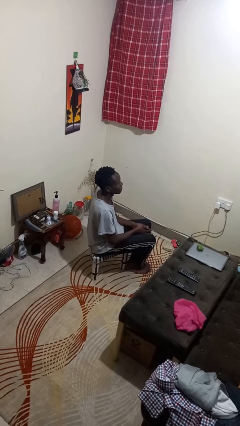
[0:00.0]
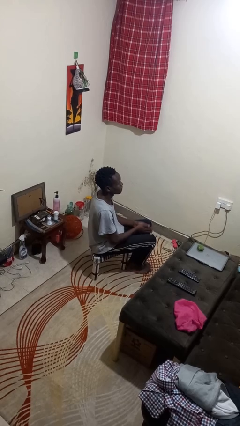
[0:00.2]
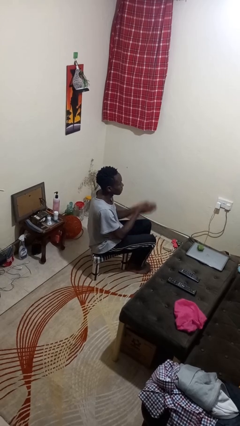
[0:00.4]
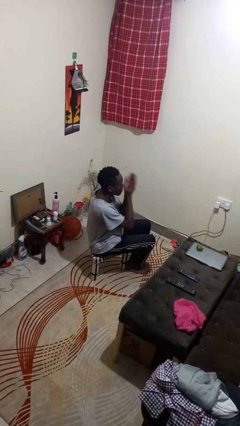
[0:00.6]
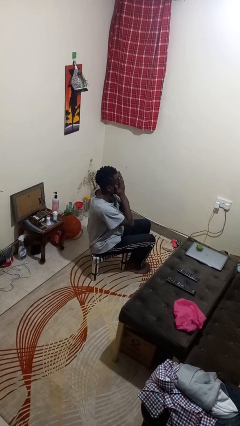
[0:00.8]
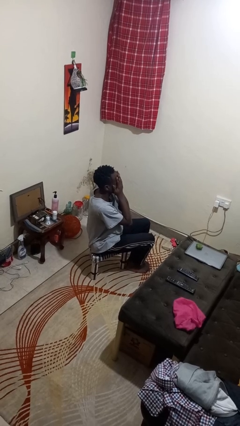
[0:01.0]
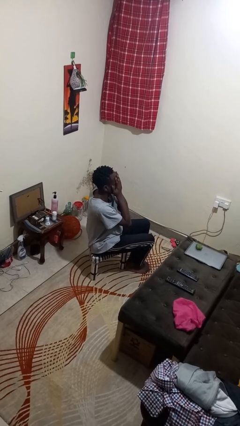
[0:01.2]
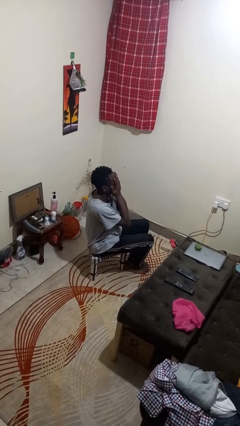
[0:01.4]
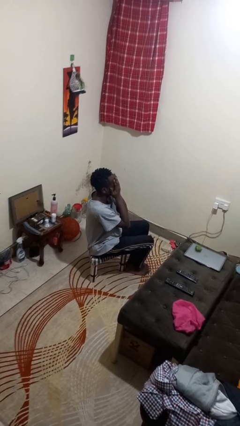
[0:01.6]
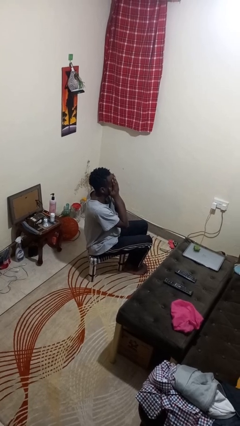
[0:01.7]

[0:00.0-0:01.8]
person covers face with hands

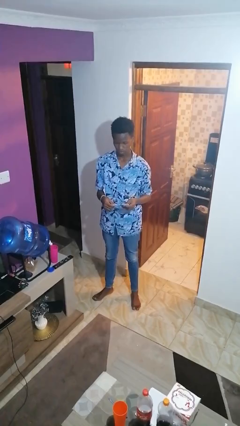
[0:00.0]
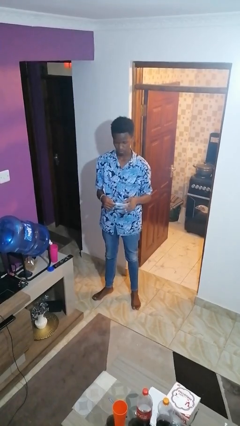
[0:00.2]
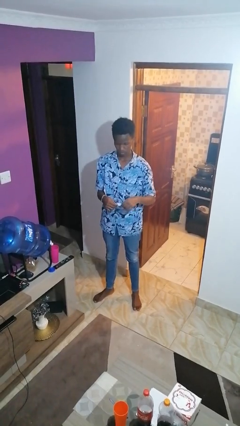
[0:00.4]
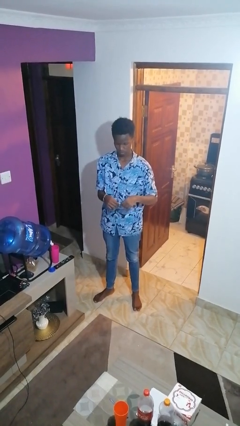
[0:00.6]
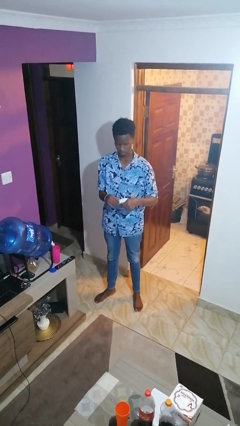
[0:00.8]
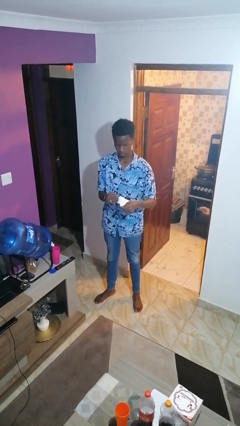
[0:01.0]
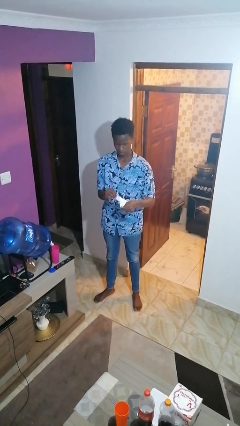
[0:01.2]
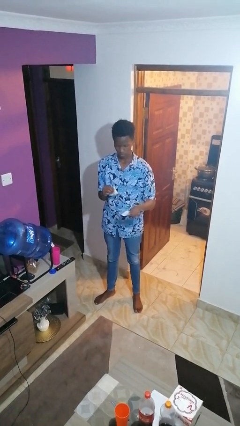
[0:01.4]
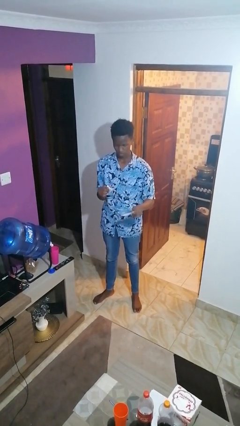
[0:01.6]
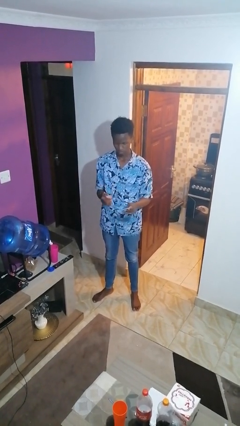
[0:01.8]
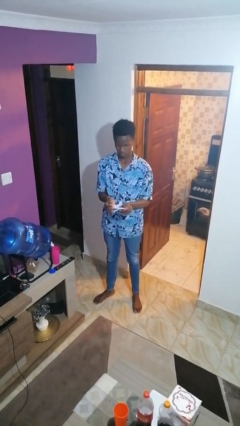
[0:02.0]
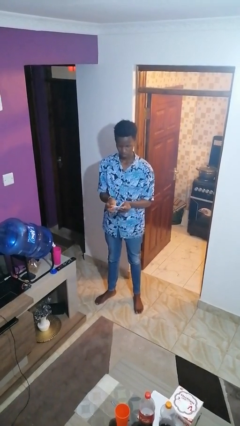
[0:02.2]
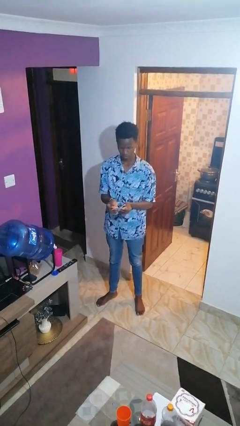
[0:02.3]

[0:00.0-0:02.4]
person tears paper

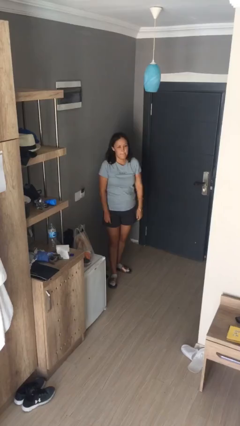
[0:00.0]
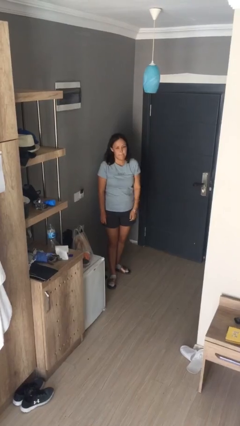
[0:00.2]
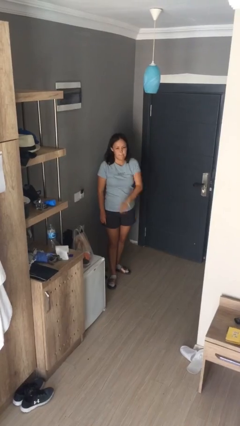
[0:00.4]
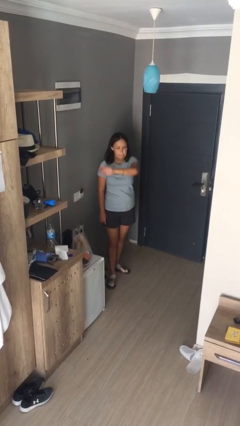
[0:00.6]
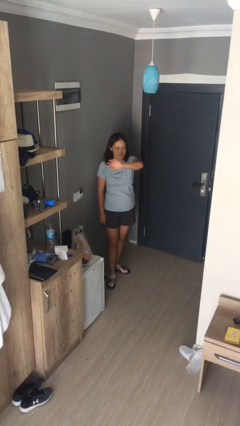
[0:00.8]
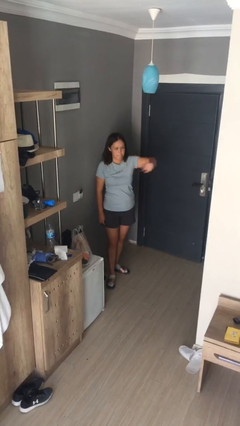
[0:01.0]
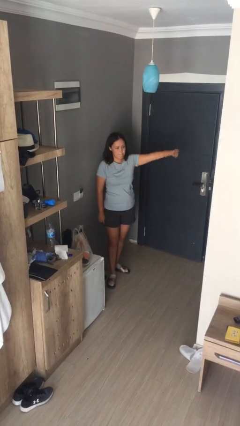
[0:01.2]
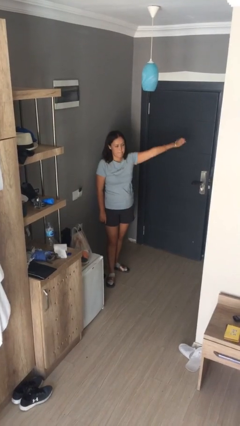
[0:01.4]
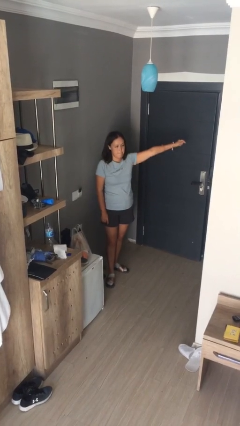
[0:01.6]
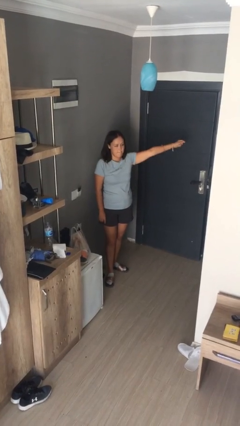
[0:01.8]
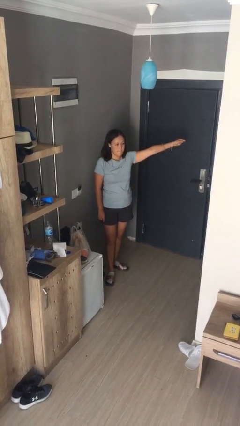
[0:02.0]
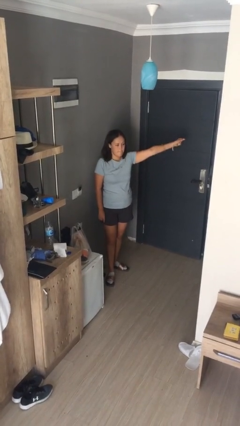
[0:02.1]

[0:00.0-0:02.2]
person gestures swipe left

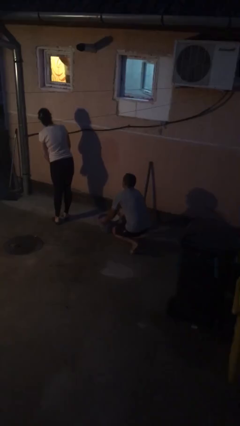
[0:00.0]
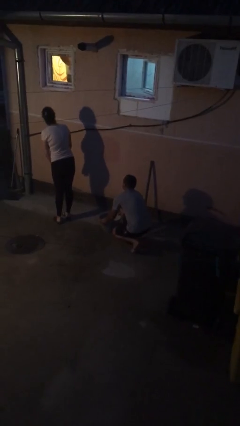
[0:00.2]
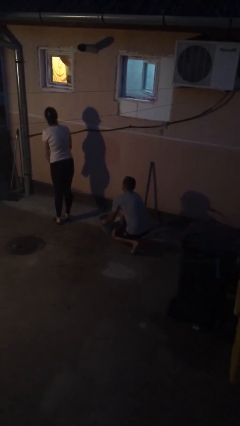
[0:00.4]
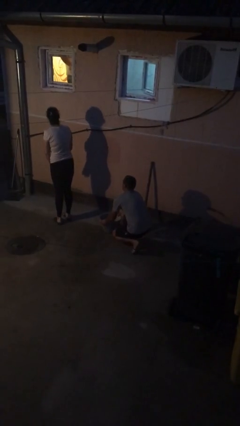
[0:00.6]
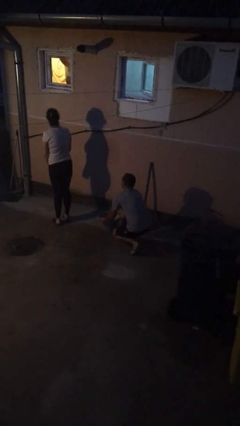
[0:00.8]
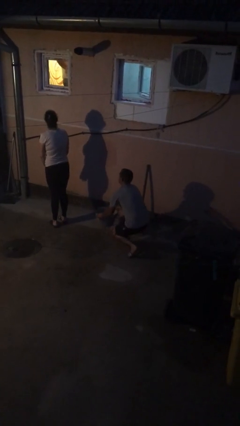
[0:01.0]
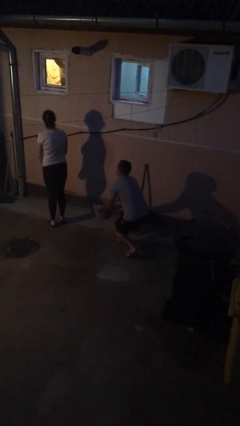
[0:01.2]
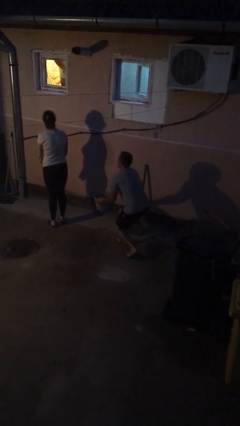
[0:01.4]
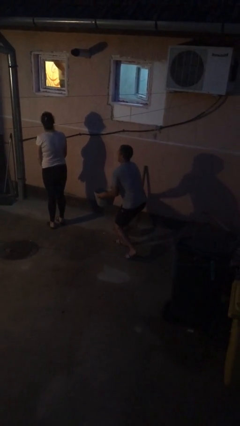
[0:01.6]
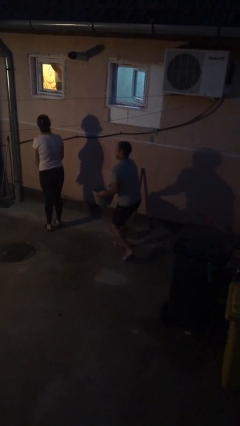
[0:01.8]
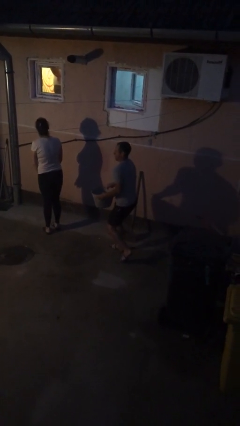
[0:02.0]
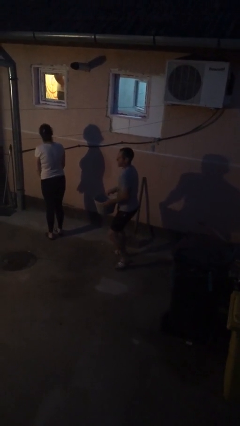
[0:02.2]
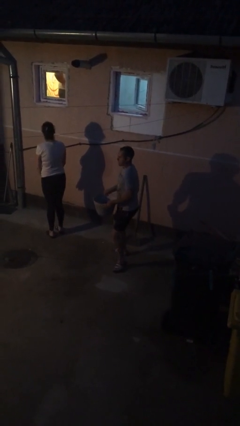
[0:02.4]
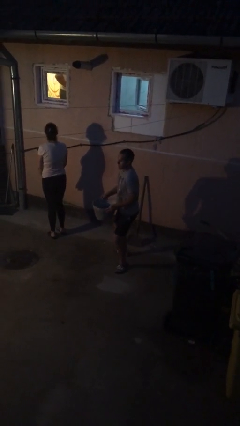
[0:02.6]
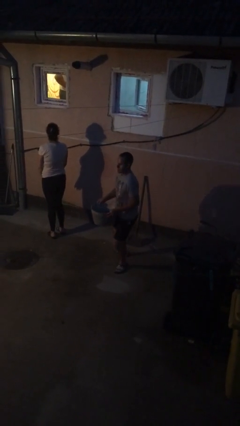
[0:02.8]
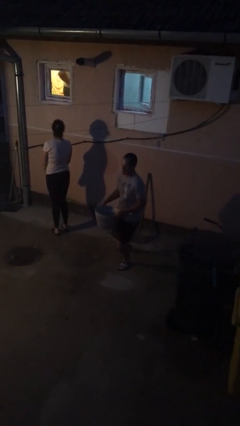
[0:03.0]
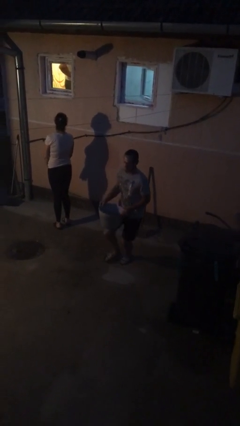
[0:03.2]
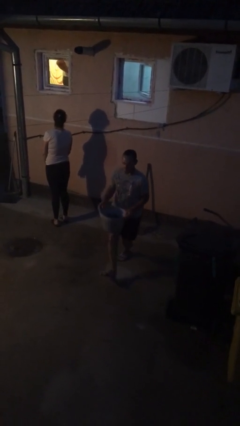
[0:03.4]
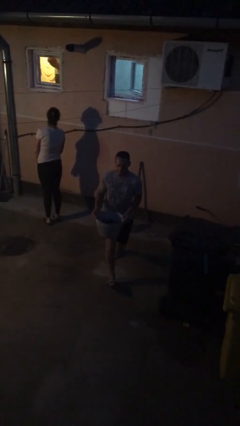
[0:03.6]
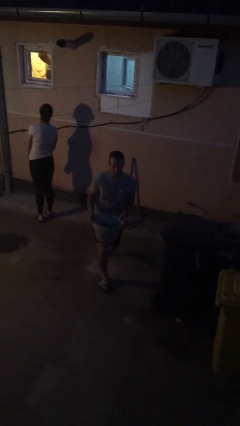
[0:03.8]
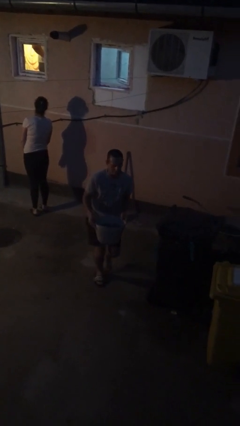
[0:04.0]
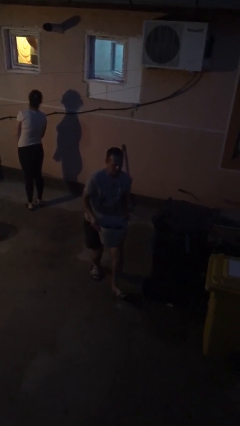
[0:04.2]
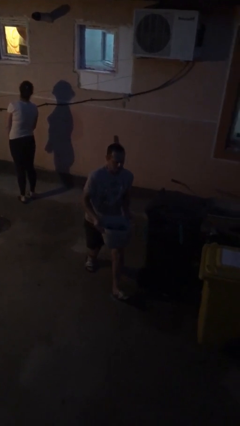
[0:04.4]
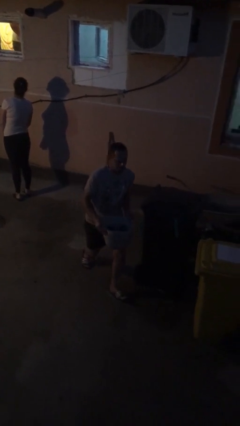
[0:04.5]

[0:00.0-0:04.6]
person steals object from person

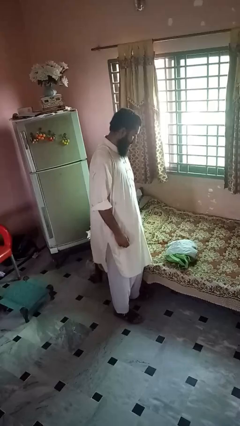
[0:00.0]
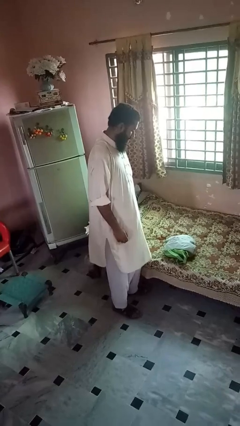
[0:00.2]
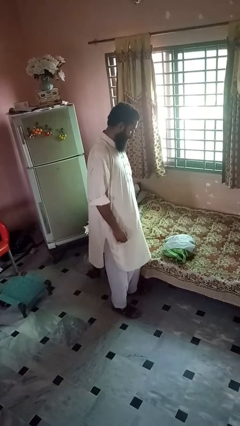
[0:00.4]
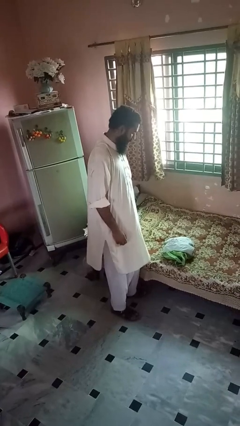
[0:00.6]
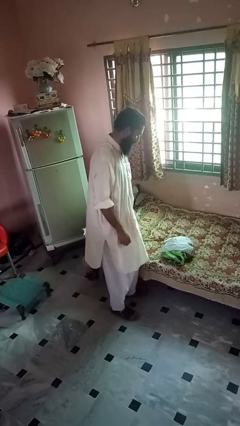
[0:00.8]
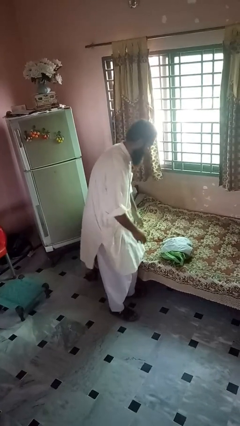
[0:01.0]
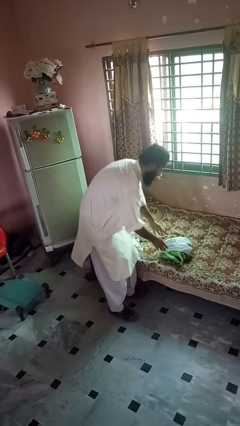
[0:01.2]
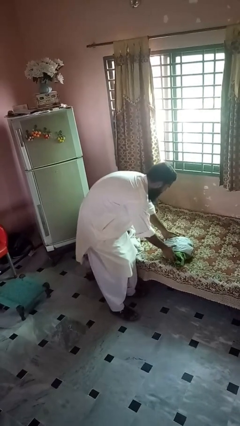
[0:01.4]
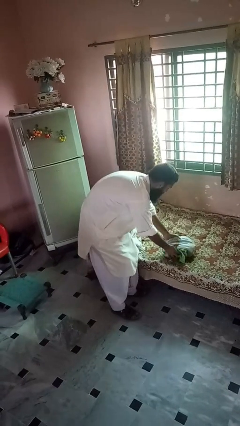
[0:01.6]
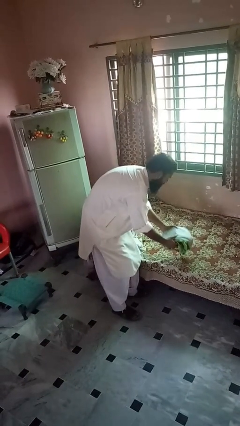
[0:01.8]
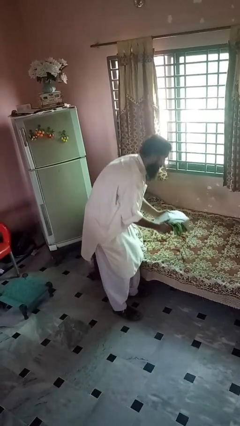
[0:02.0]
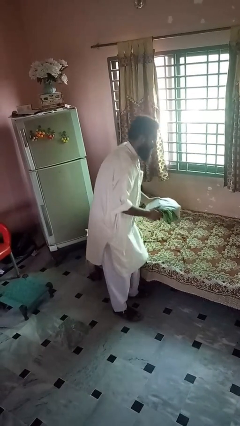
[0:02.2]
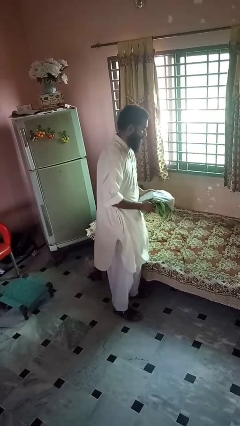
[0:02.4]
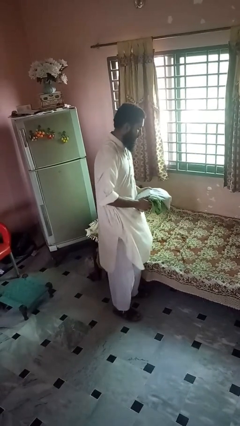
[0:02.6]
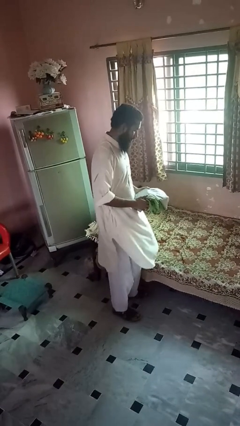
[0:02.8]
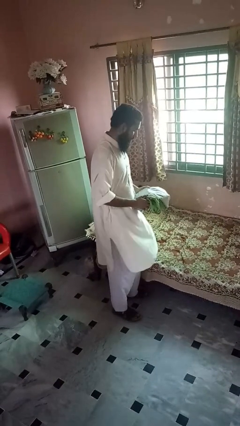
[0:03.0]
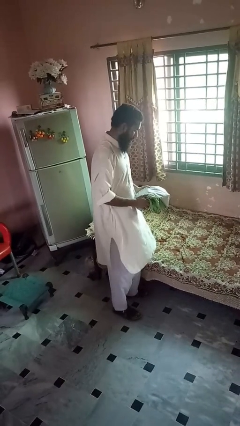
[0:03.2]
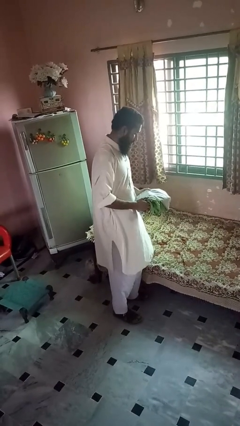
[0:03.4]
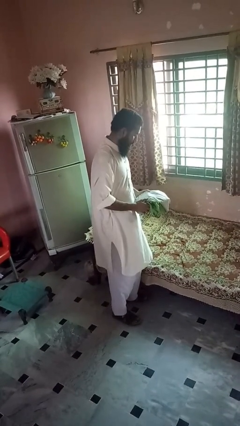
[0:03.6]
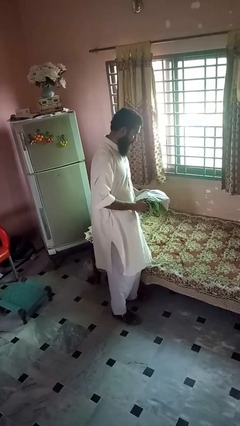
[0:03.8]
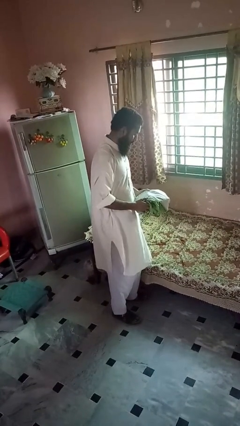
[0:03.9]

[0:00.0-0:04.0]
person picks up object from bed

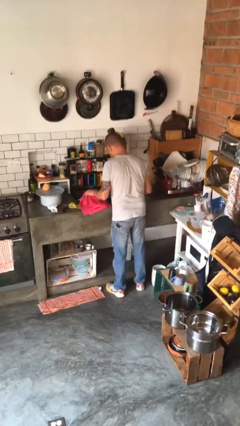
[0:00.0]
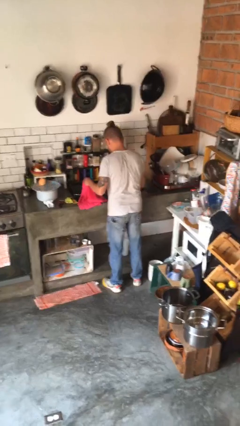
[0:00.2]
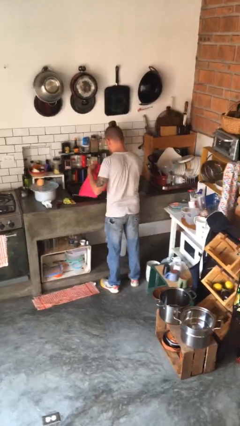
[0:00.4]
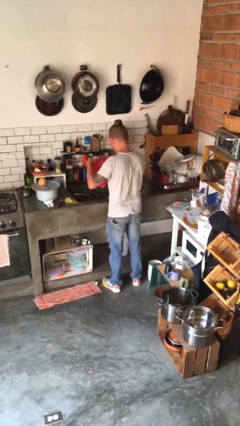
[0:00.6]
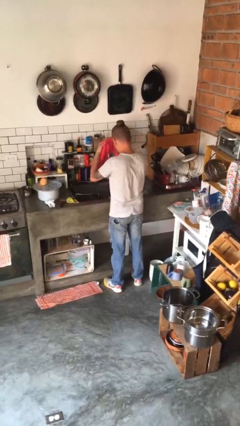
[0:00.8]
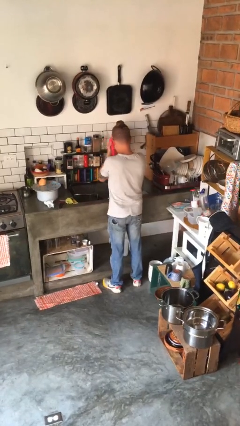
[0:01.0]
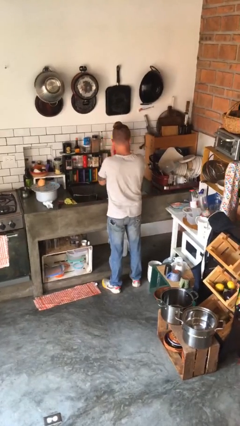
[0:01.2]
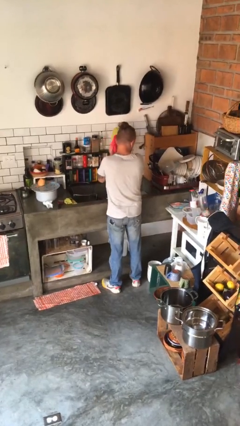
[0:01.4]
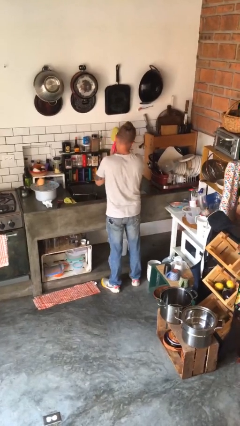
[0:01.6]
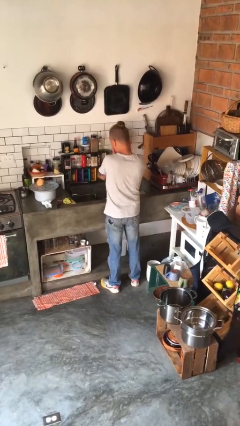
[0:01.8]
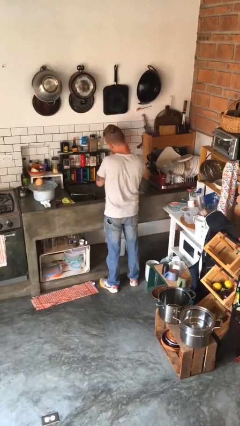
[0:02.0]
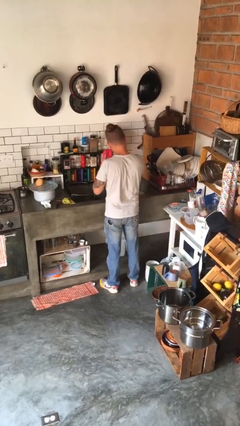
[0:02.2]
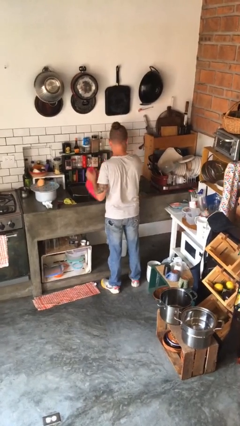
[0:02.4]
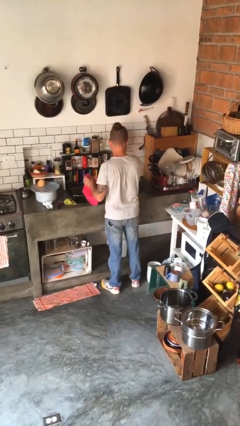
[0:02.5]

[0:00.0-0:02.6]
person dries face with towel
